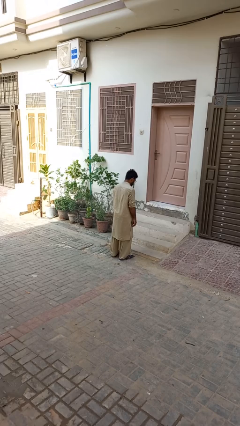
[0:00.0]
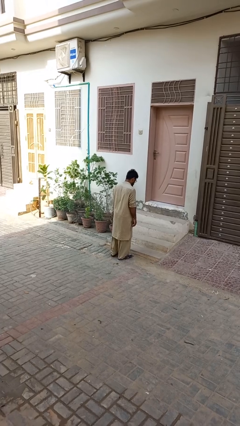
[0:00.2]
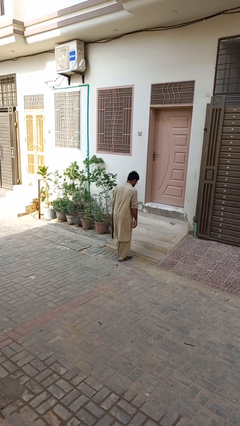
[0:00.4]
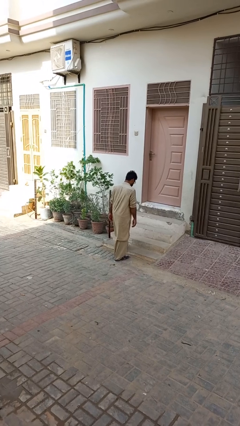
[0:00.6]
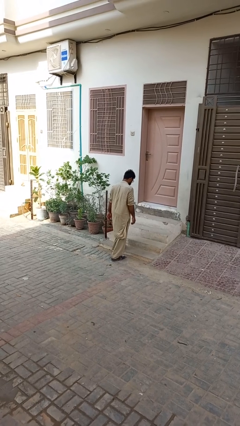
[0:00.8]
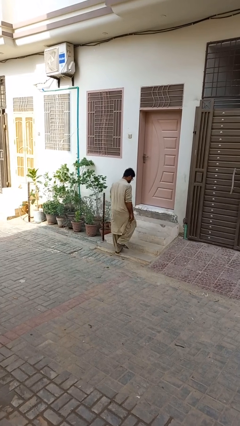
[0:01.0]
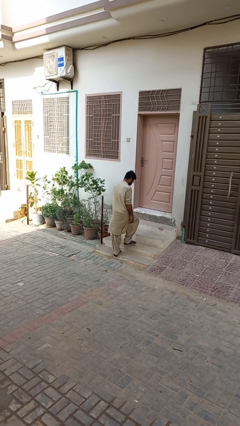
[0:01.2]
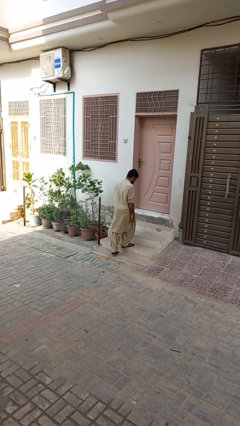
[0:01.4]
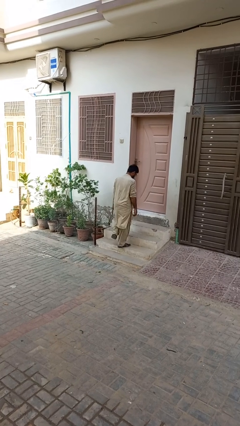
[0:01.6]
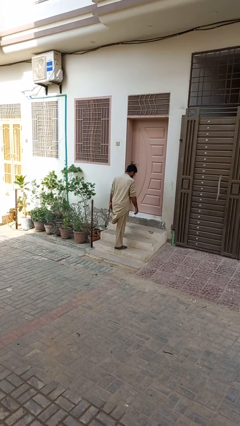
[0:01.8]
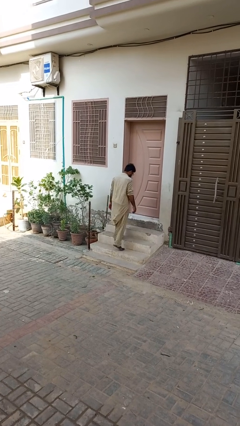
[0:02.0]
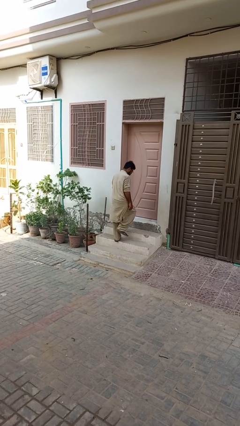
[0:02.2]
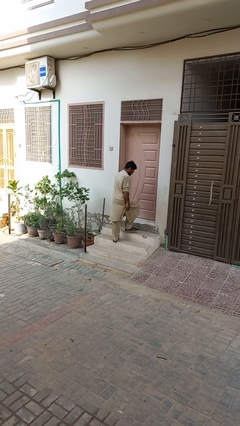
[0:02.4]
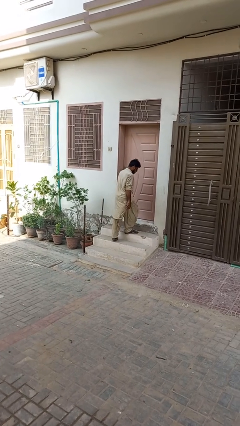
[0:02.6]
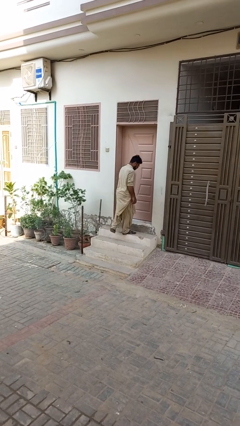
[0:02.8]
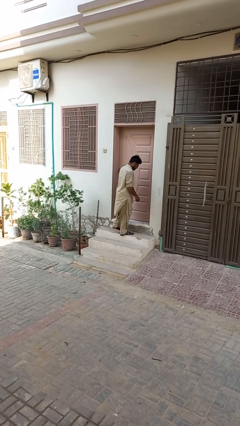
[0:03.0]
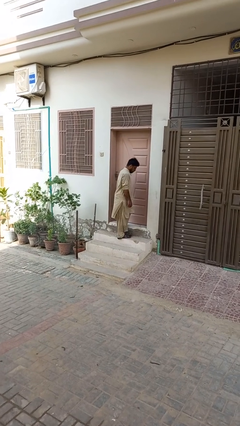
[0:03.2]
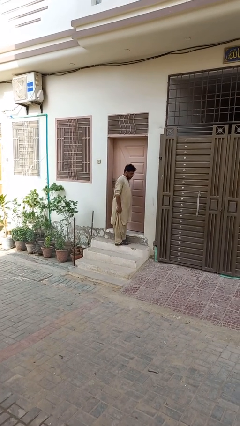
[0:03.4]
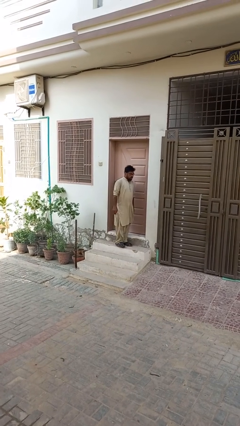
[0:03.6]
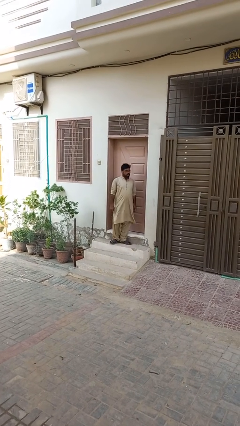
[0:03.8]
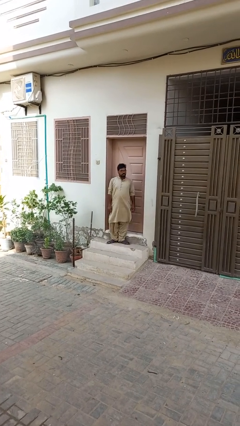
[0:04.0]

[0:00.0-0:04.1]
person climbs up stairs

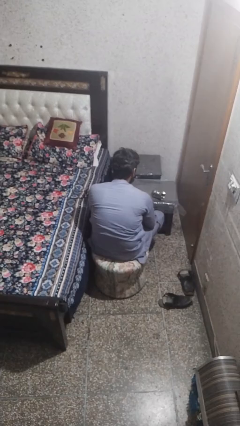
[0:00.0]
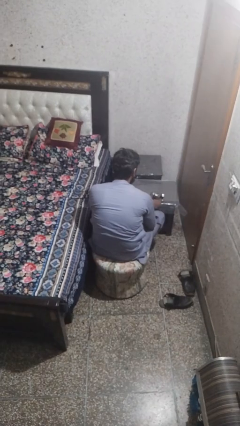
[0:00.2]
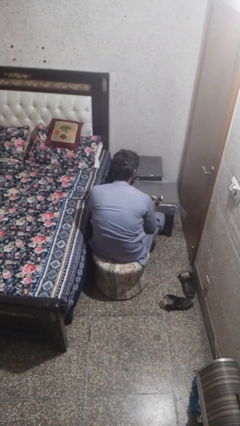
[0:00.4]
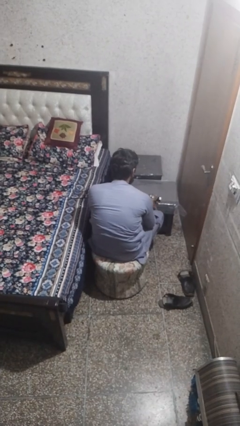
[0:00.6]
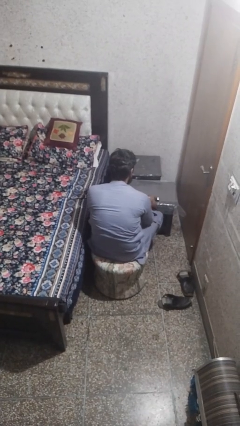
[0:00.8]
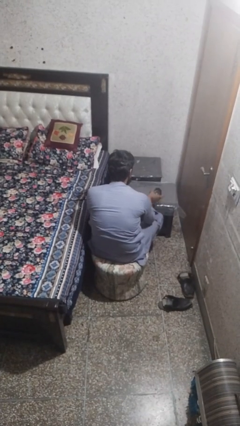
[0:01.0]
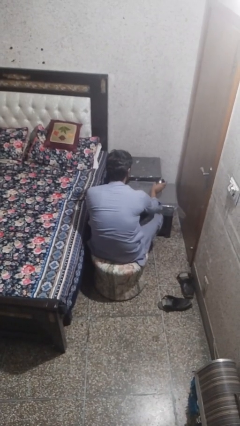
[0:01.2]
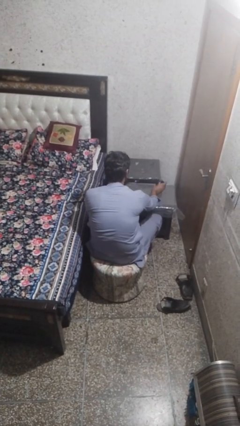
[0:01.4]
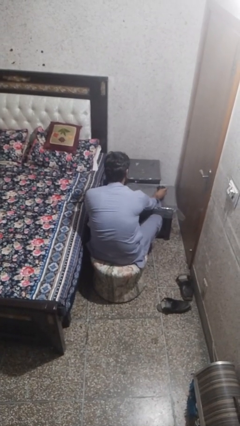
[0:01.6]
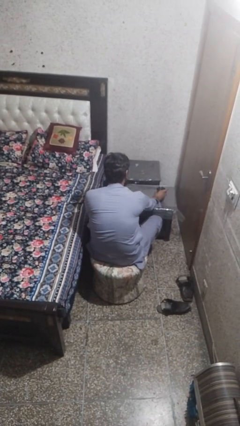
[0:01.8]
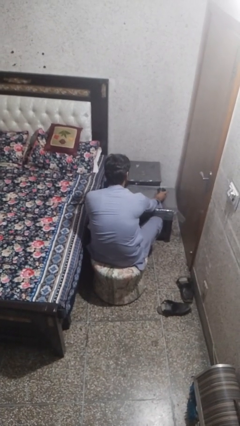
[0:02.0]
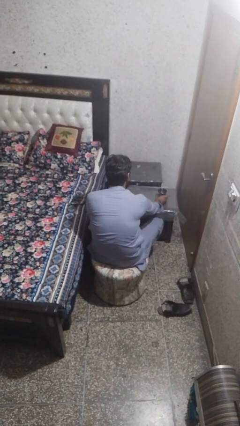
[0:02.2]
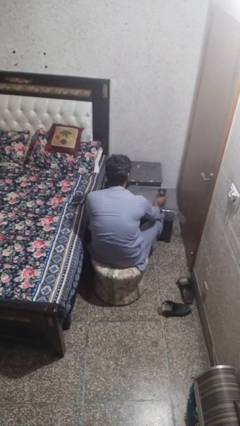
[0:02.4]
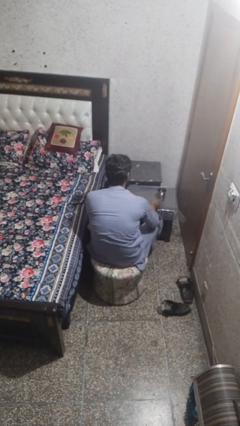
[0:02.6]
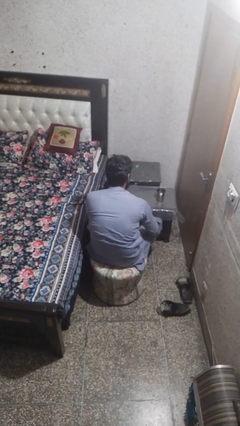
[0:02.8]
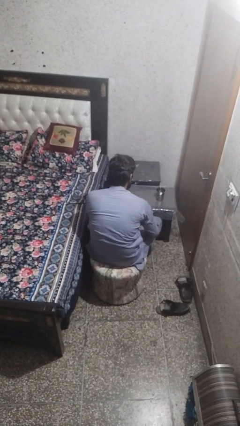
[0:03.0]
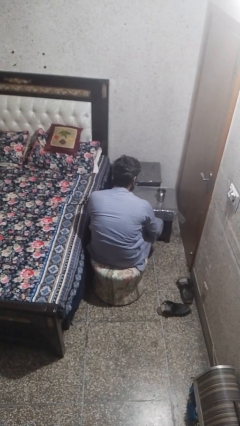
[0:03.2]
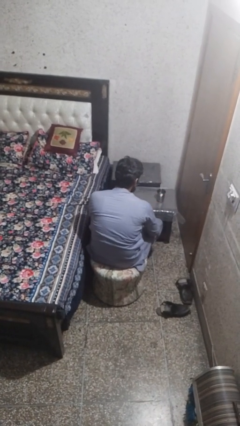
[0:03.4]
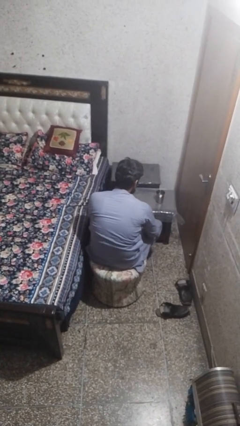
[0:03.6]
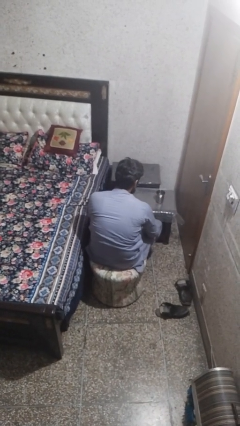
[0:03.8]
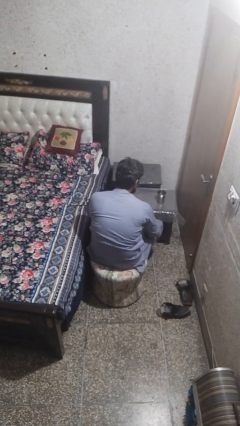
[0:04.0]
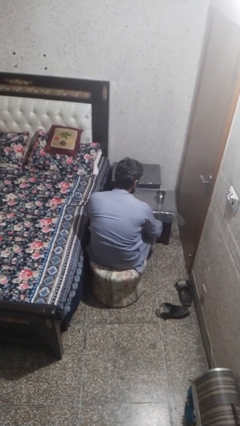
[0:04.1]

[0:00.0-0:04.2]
person sets upright glass

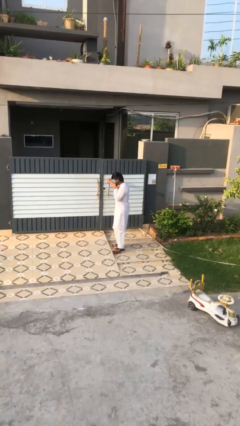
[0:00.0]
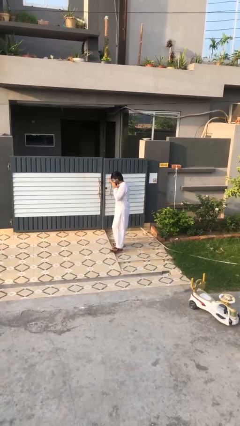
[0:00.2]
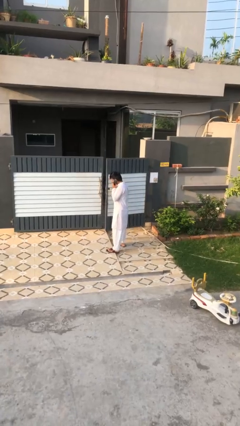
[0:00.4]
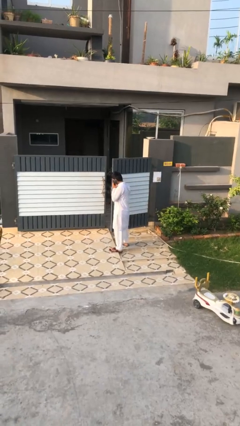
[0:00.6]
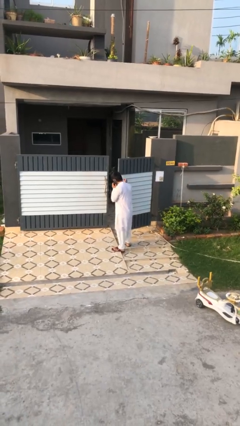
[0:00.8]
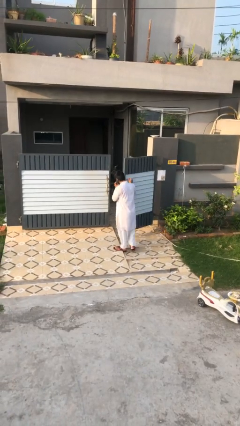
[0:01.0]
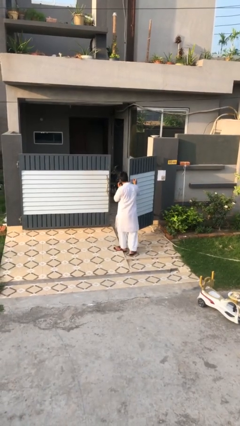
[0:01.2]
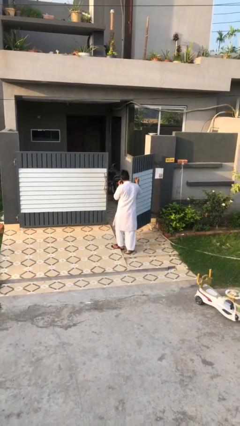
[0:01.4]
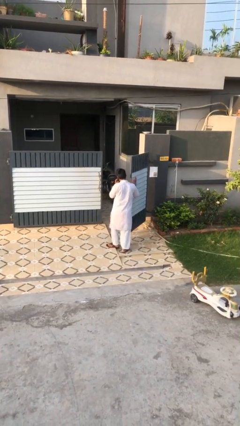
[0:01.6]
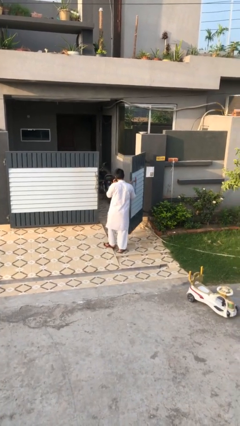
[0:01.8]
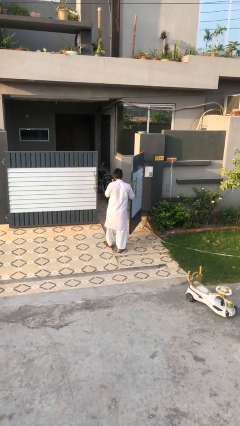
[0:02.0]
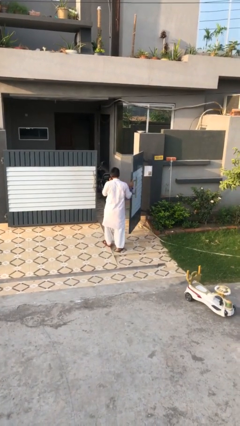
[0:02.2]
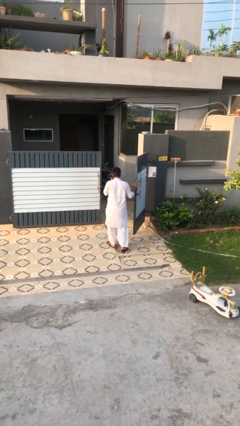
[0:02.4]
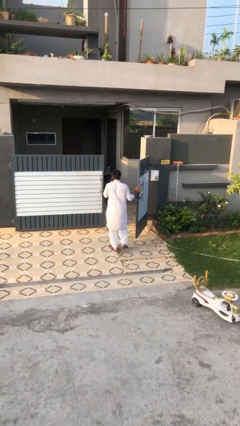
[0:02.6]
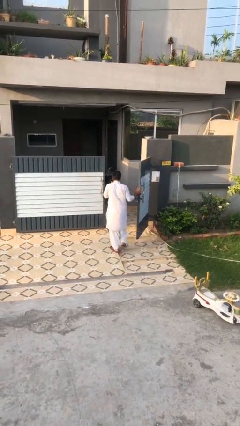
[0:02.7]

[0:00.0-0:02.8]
person opens facility door

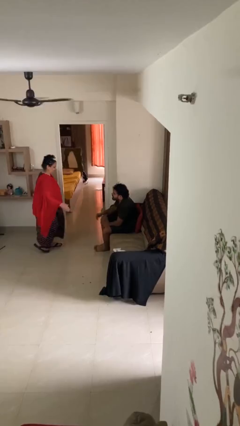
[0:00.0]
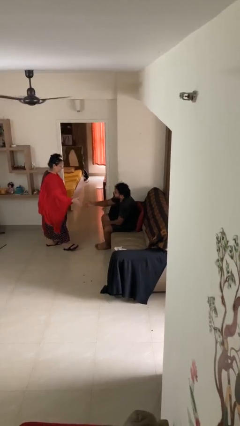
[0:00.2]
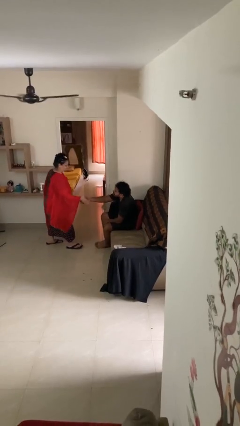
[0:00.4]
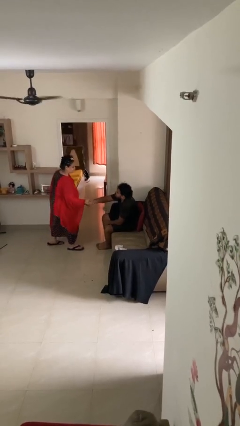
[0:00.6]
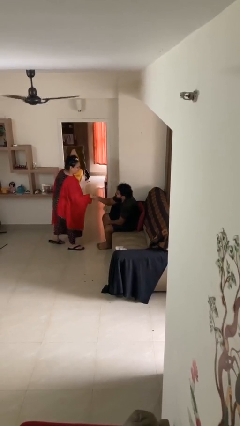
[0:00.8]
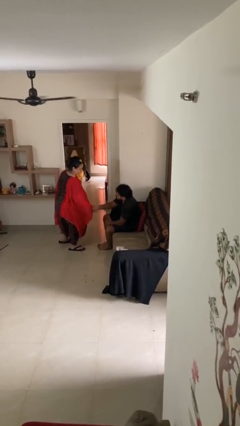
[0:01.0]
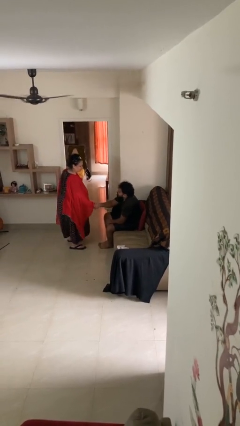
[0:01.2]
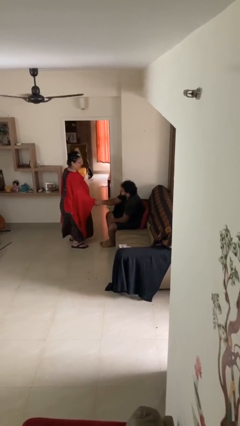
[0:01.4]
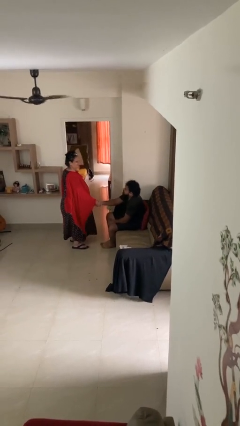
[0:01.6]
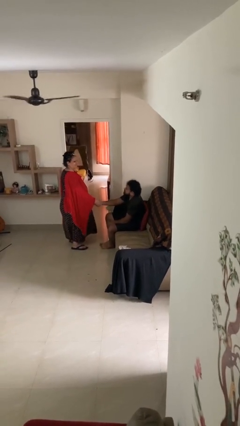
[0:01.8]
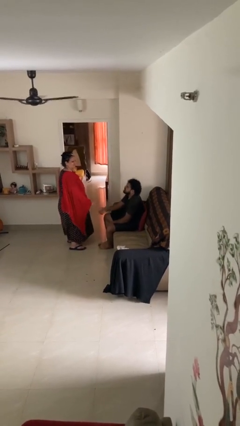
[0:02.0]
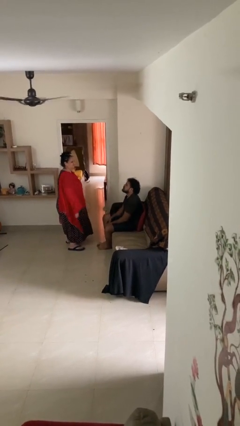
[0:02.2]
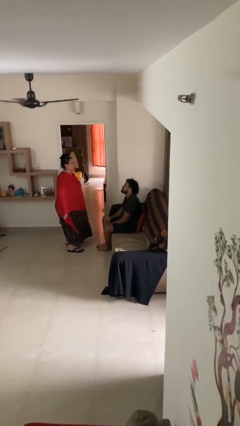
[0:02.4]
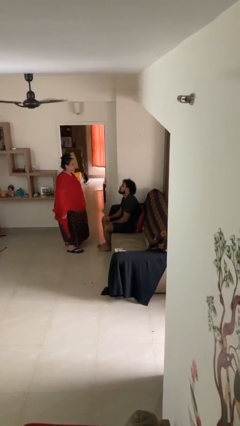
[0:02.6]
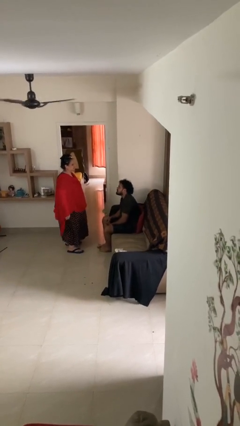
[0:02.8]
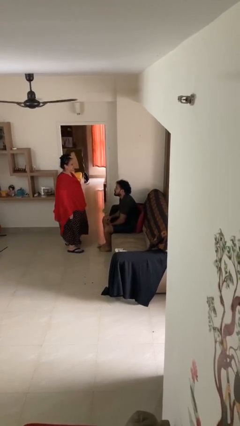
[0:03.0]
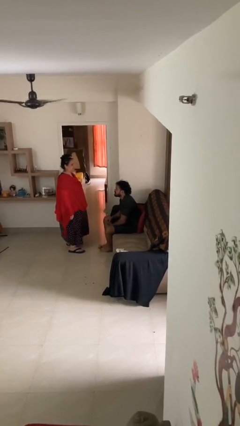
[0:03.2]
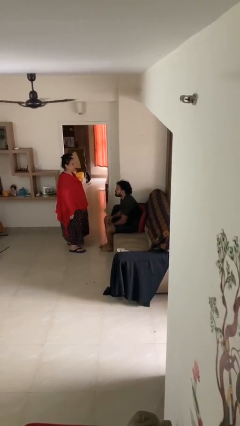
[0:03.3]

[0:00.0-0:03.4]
person shakes hand

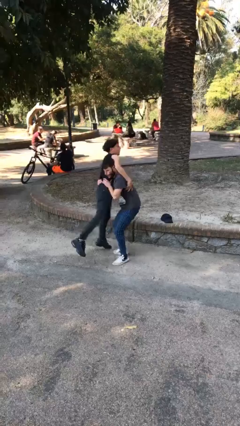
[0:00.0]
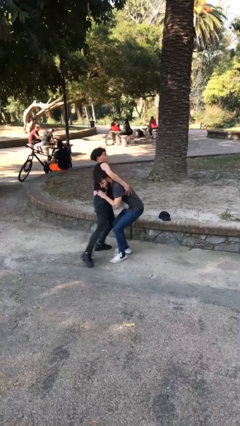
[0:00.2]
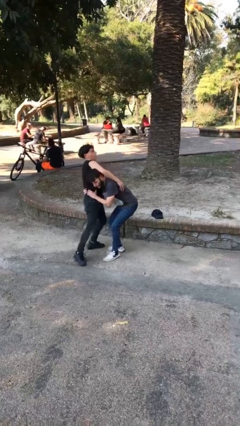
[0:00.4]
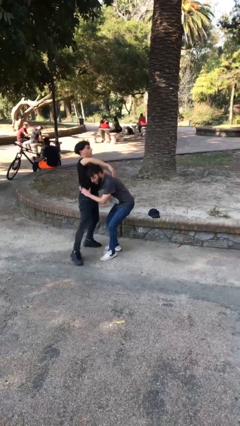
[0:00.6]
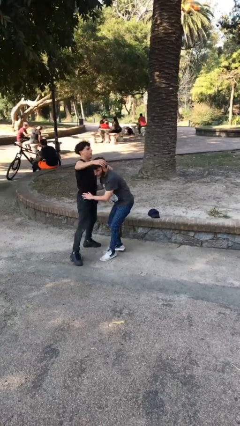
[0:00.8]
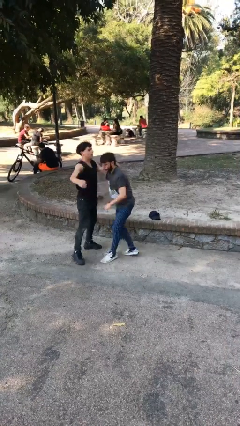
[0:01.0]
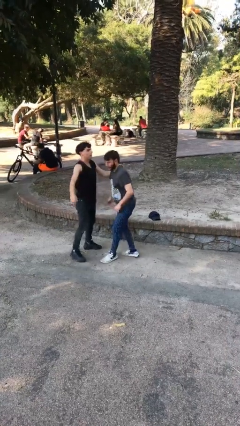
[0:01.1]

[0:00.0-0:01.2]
person puts down person

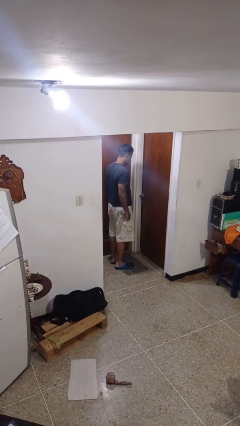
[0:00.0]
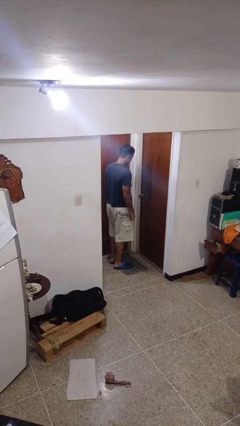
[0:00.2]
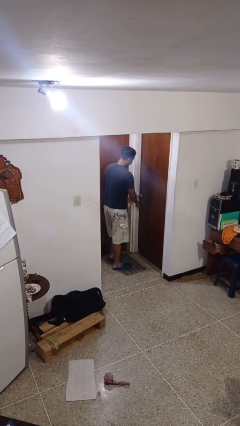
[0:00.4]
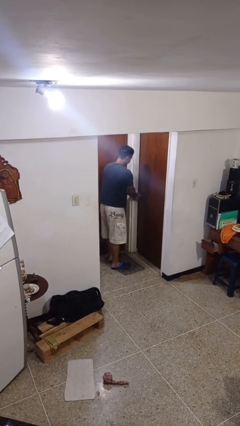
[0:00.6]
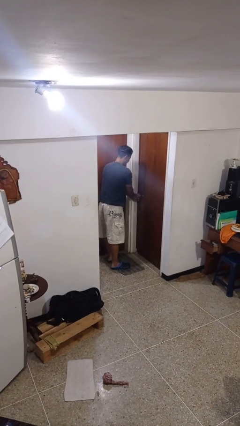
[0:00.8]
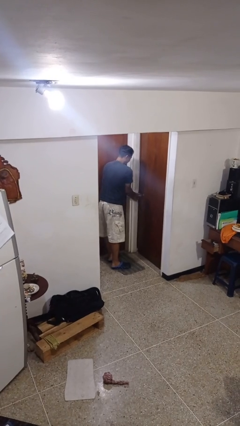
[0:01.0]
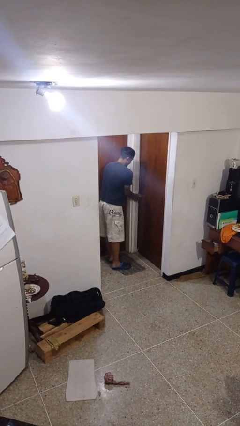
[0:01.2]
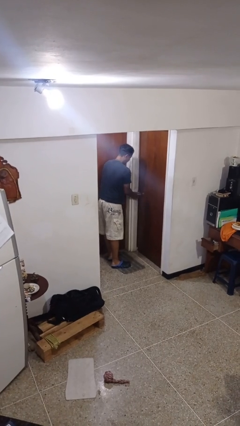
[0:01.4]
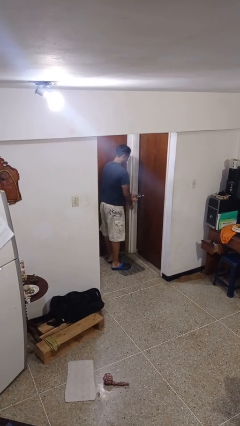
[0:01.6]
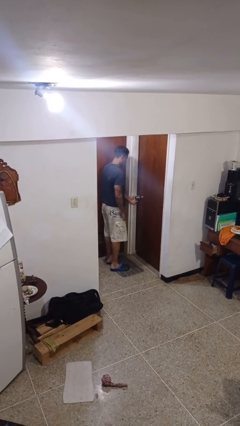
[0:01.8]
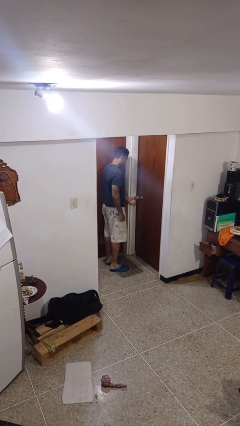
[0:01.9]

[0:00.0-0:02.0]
person unlocks door with keys
